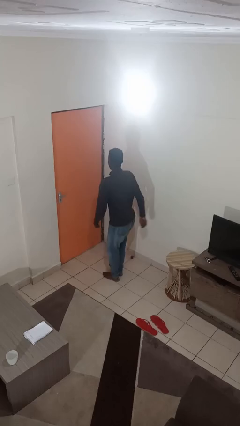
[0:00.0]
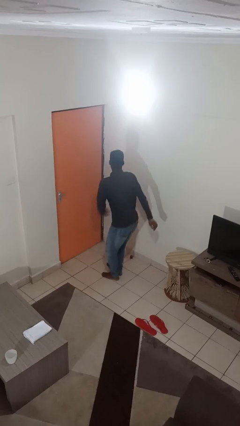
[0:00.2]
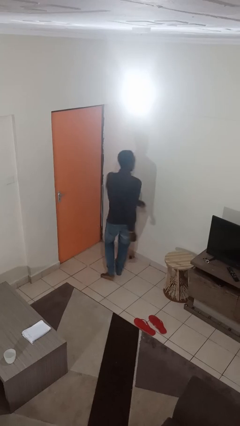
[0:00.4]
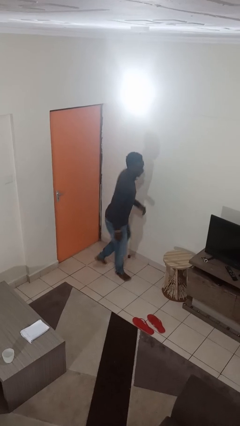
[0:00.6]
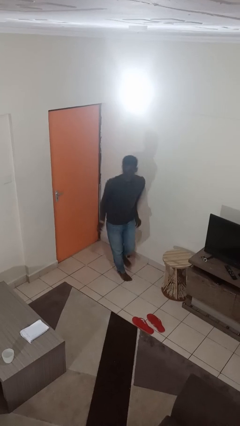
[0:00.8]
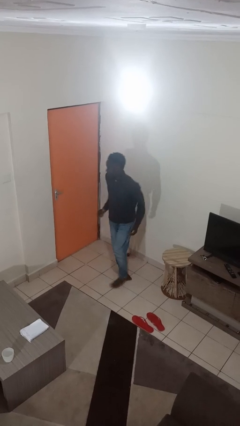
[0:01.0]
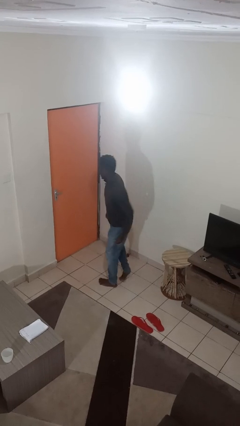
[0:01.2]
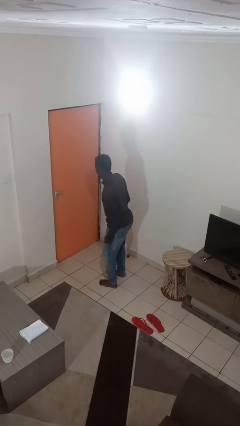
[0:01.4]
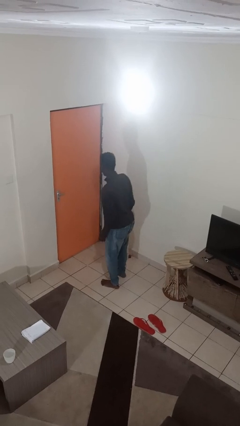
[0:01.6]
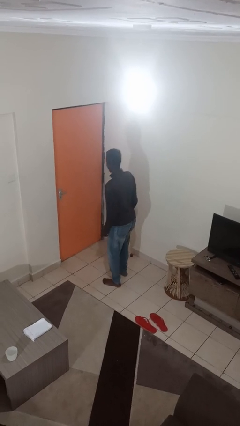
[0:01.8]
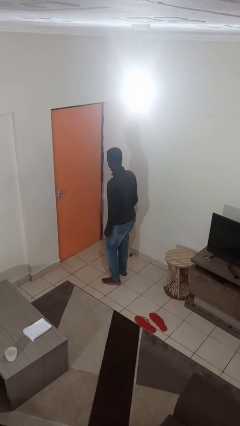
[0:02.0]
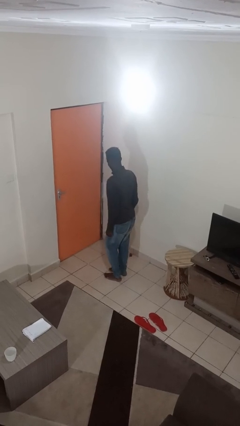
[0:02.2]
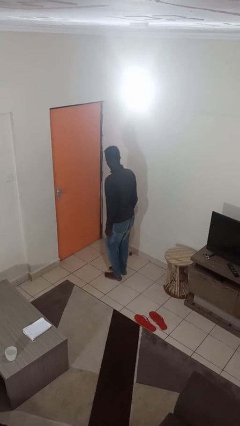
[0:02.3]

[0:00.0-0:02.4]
person twirls

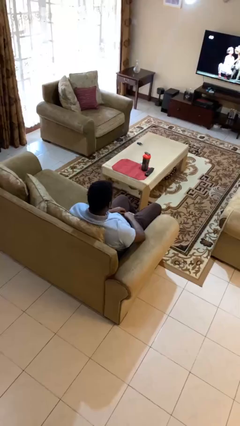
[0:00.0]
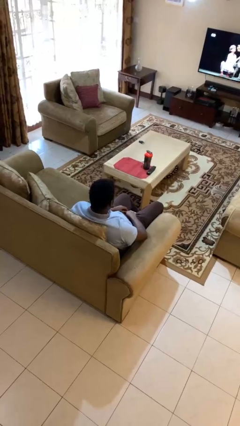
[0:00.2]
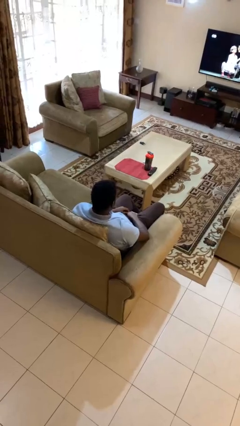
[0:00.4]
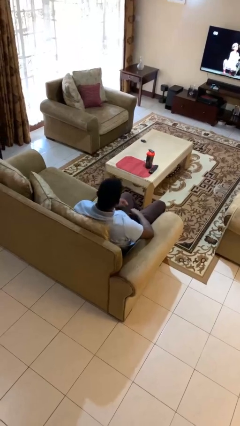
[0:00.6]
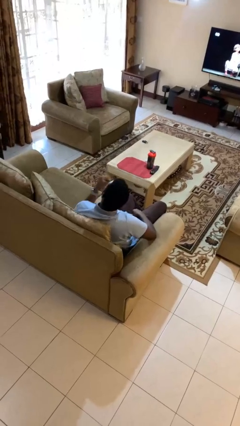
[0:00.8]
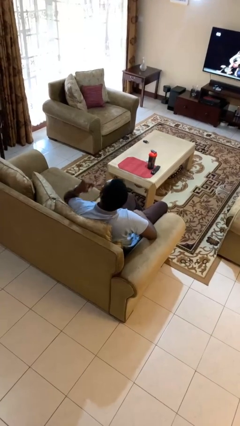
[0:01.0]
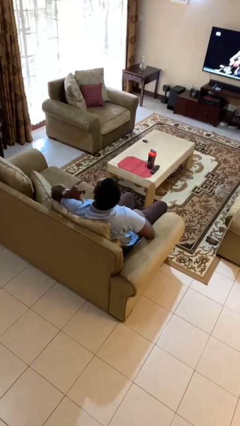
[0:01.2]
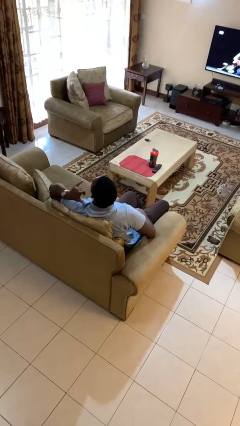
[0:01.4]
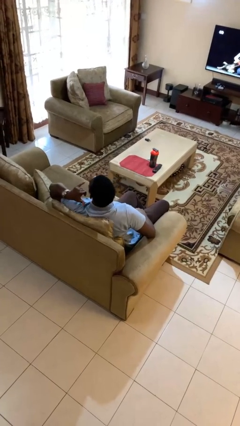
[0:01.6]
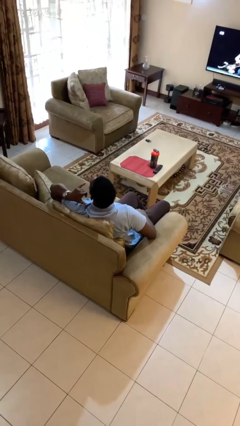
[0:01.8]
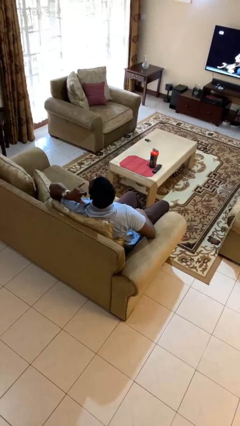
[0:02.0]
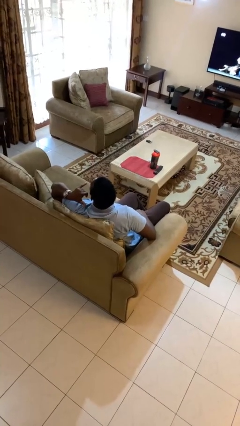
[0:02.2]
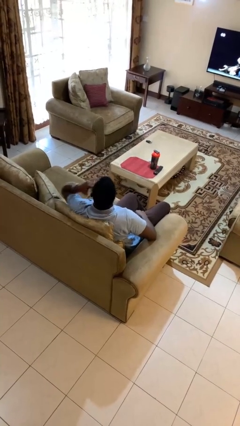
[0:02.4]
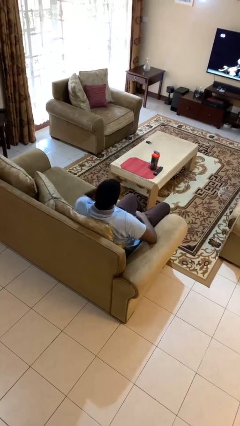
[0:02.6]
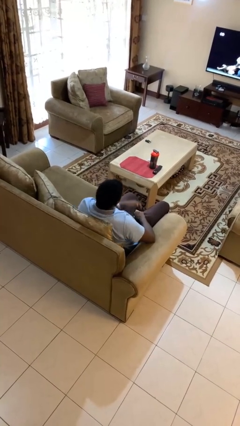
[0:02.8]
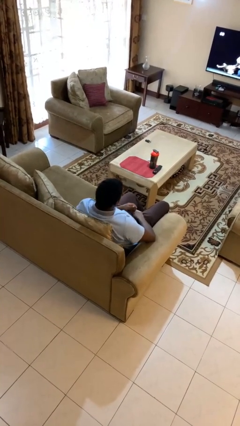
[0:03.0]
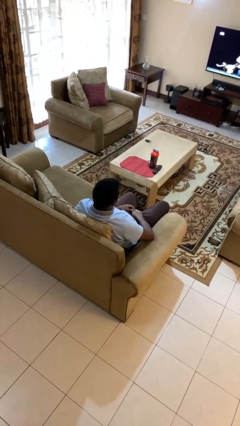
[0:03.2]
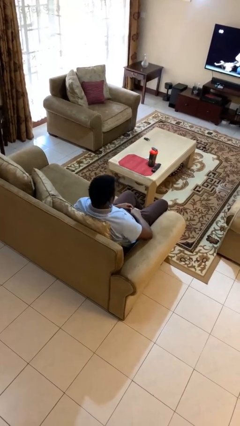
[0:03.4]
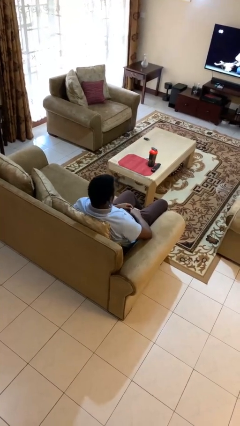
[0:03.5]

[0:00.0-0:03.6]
person gestures call me

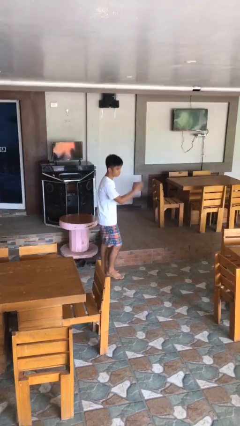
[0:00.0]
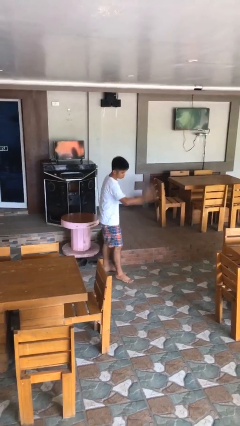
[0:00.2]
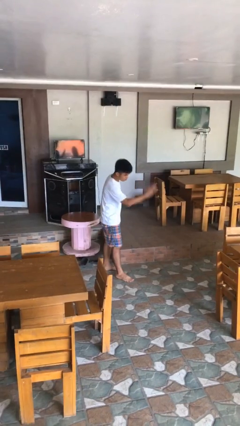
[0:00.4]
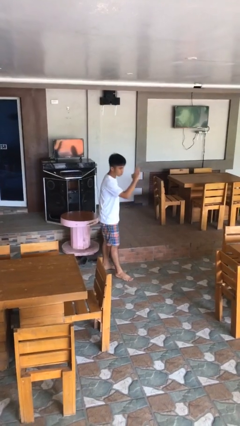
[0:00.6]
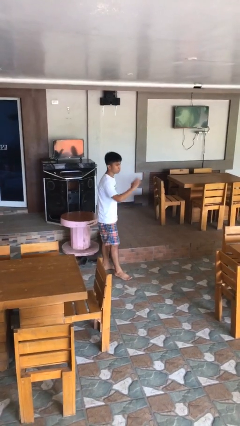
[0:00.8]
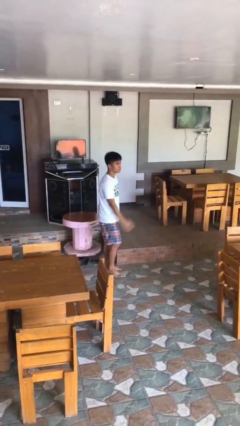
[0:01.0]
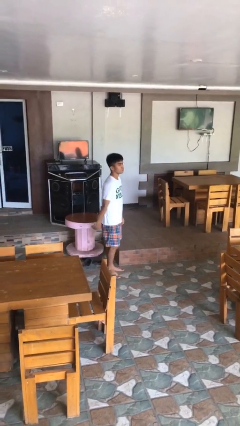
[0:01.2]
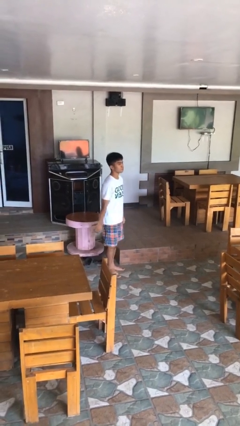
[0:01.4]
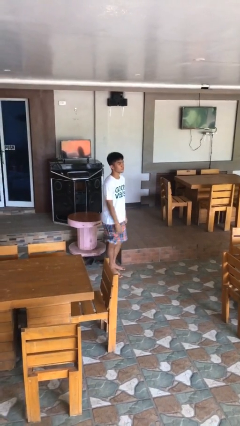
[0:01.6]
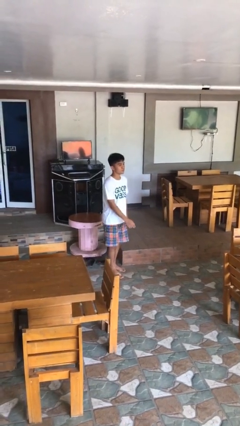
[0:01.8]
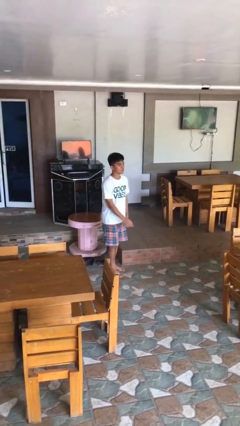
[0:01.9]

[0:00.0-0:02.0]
person karate chop

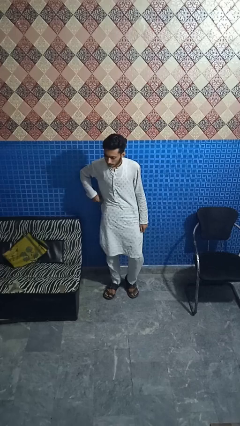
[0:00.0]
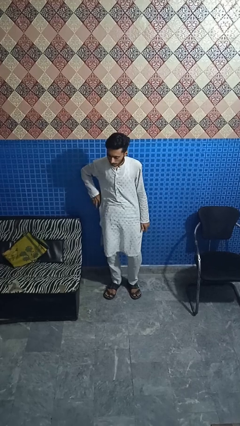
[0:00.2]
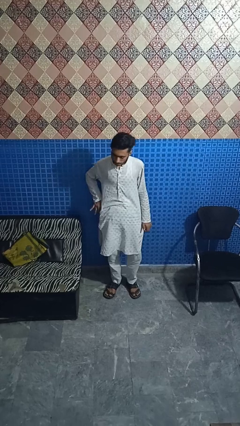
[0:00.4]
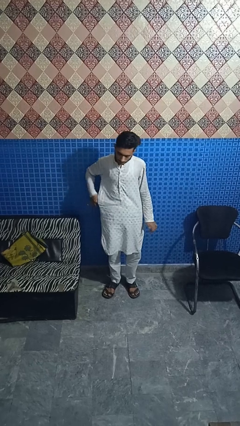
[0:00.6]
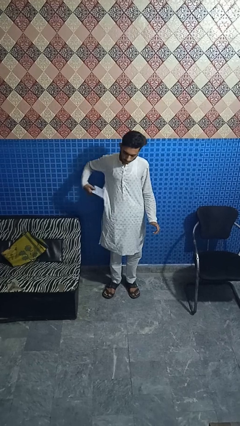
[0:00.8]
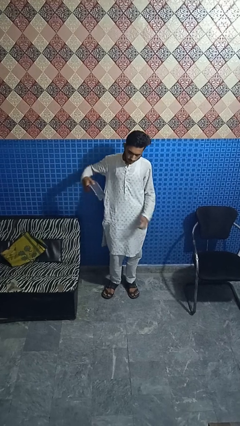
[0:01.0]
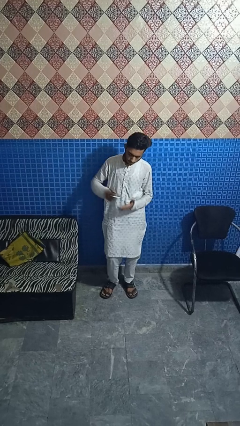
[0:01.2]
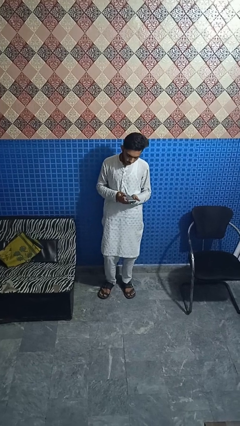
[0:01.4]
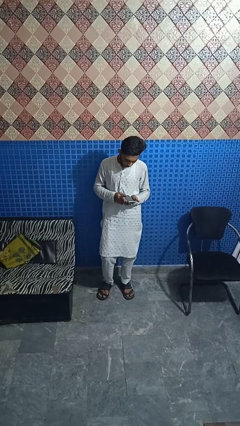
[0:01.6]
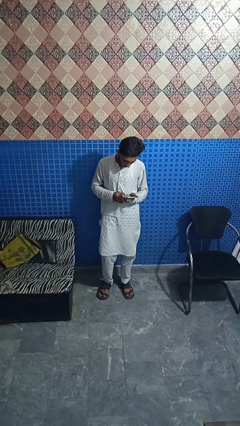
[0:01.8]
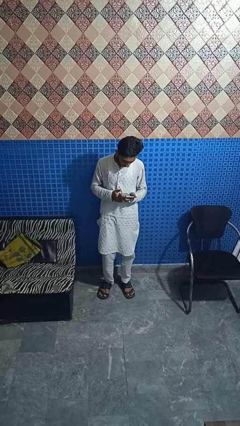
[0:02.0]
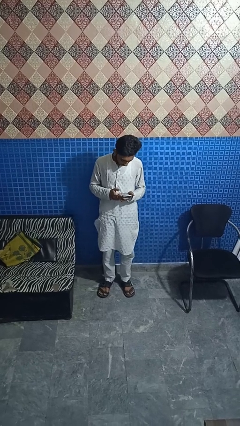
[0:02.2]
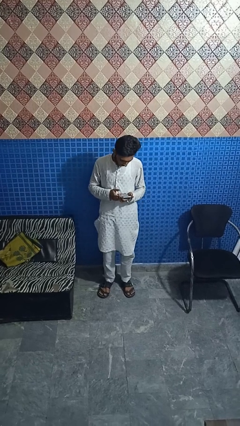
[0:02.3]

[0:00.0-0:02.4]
person takes phone from pocket

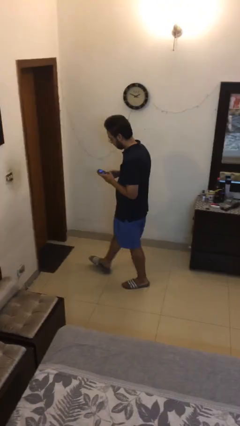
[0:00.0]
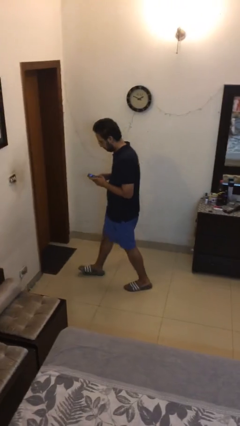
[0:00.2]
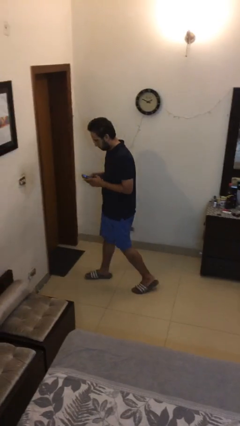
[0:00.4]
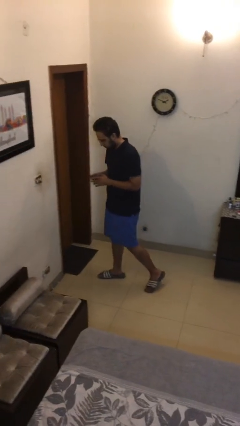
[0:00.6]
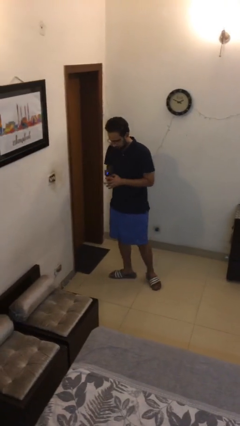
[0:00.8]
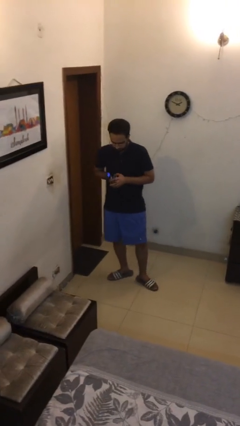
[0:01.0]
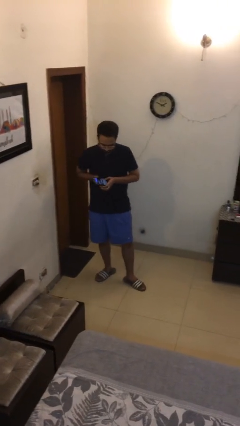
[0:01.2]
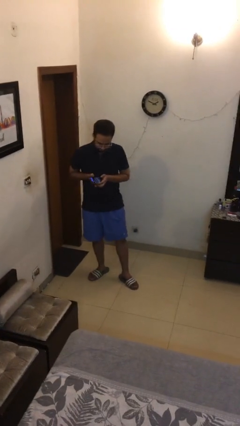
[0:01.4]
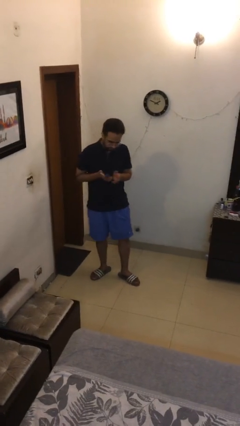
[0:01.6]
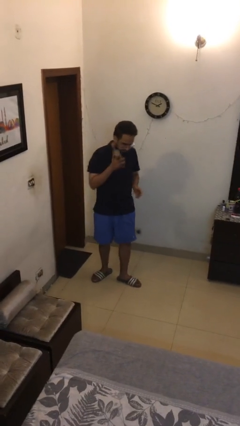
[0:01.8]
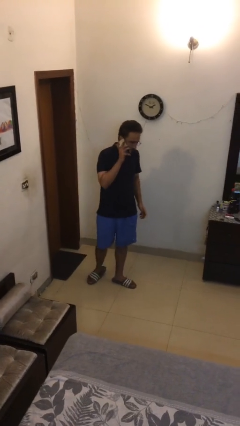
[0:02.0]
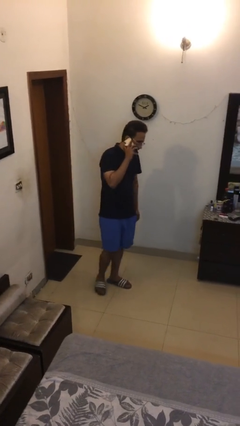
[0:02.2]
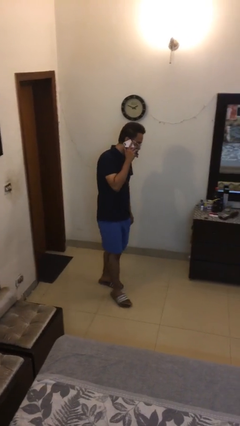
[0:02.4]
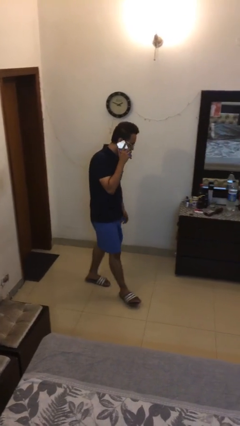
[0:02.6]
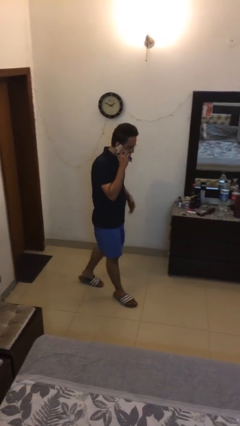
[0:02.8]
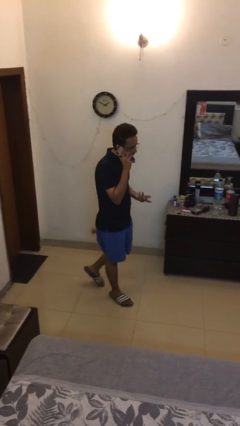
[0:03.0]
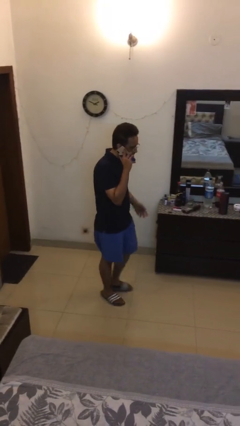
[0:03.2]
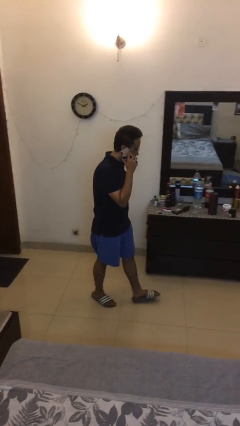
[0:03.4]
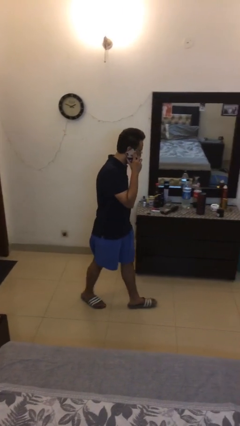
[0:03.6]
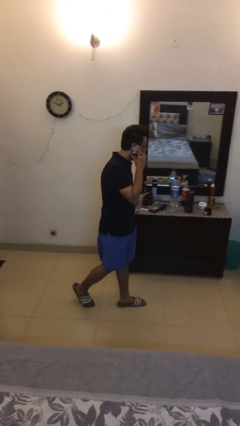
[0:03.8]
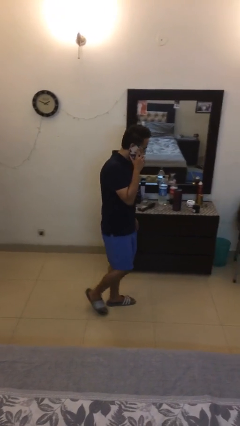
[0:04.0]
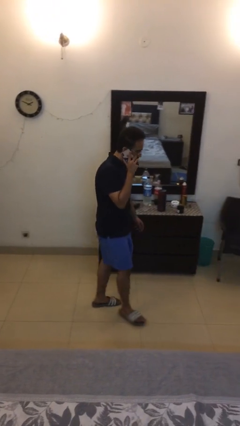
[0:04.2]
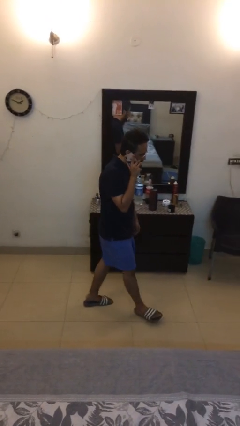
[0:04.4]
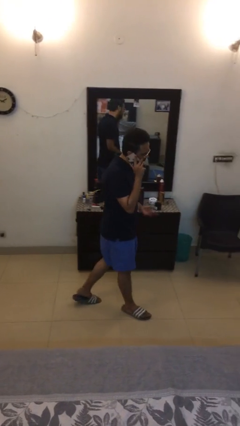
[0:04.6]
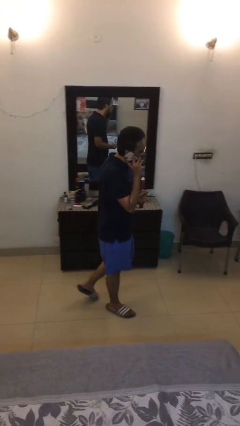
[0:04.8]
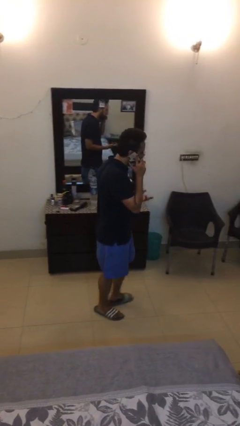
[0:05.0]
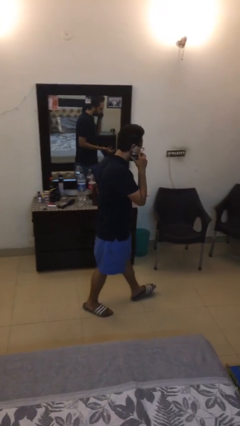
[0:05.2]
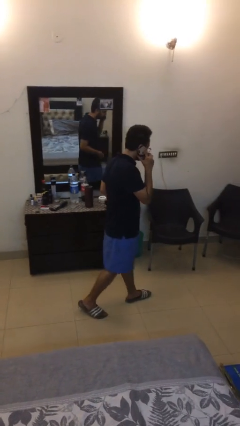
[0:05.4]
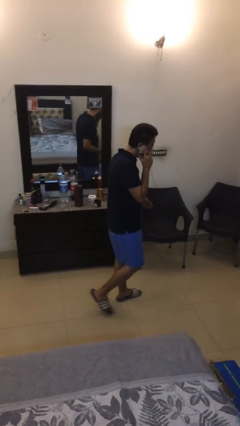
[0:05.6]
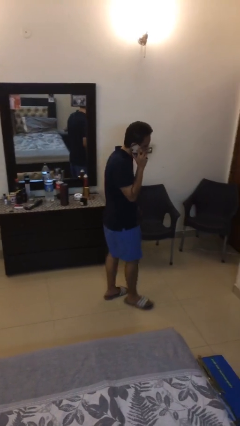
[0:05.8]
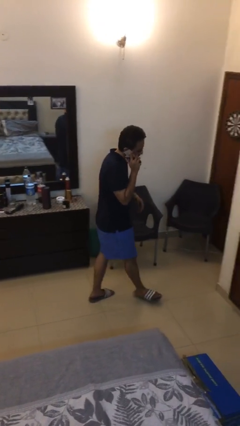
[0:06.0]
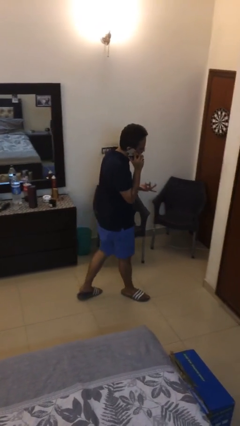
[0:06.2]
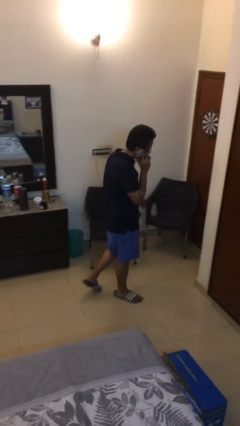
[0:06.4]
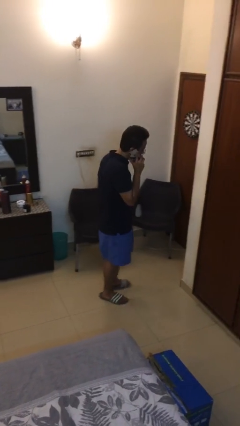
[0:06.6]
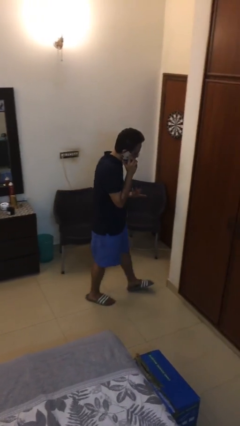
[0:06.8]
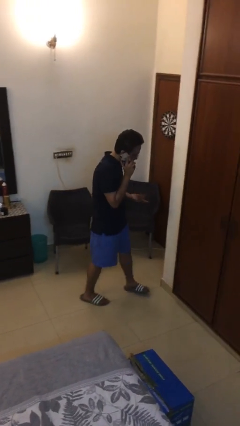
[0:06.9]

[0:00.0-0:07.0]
person talks on phone

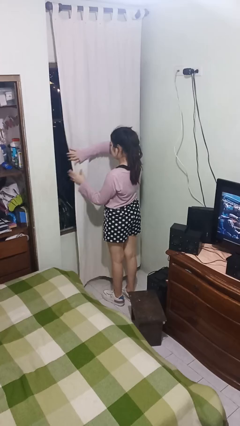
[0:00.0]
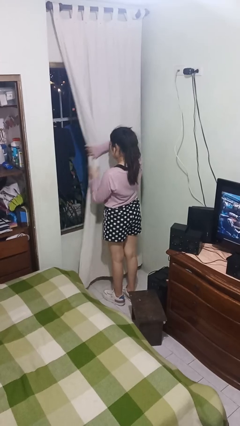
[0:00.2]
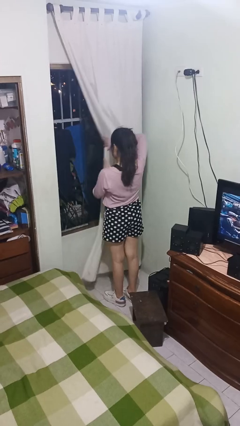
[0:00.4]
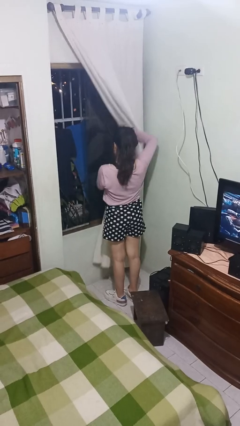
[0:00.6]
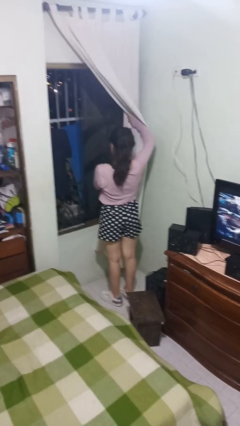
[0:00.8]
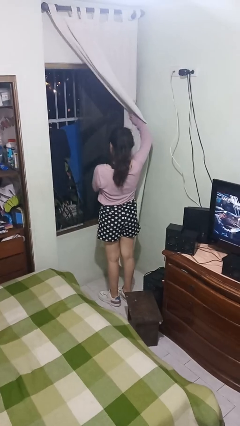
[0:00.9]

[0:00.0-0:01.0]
person opens curtains
